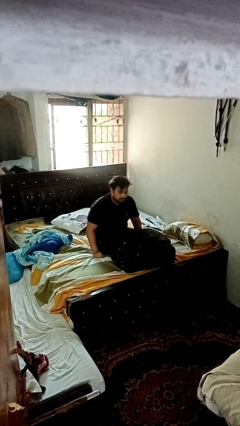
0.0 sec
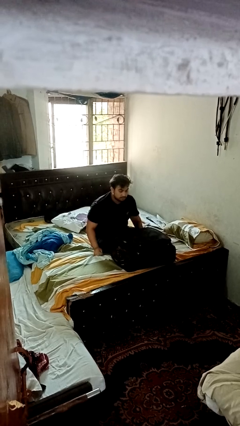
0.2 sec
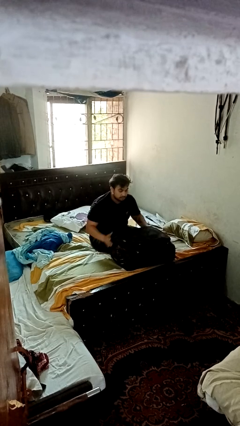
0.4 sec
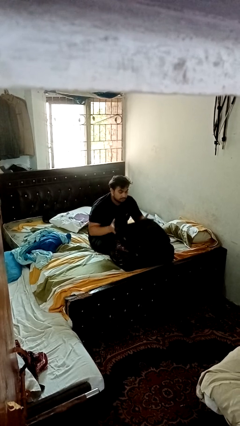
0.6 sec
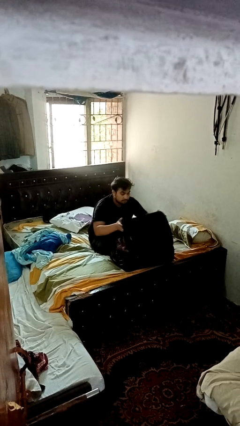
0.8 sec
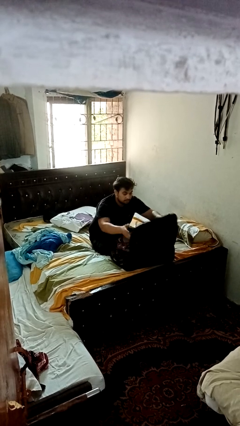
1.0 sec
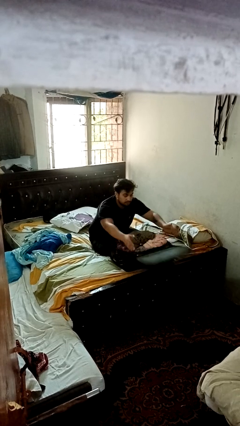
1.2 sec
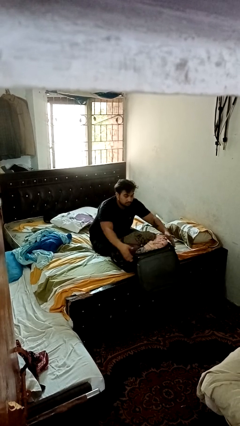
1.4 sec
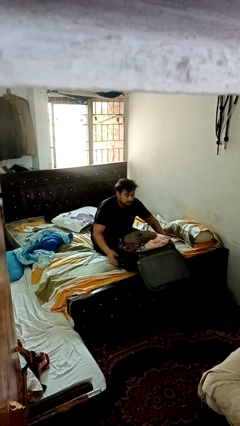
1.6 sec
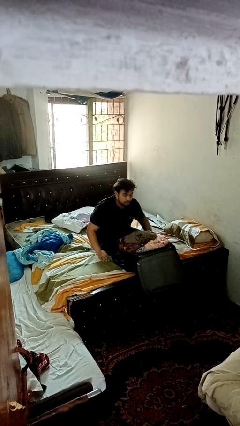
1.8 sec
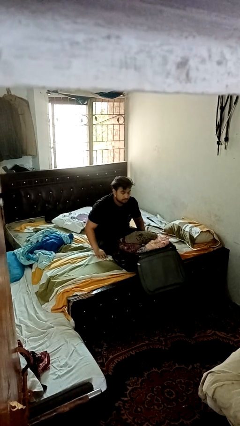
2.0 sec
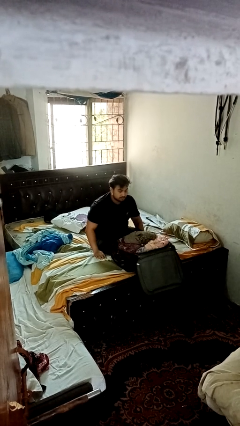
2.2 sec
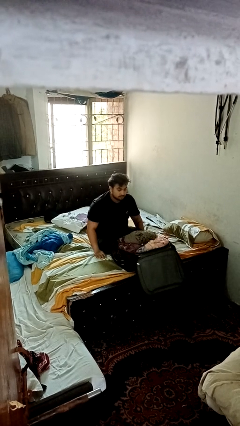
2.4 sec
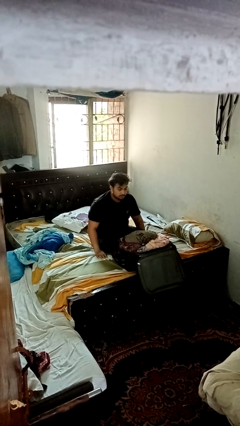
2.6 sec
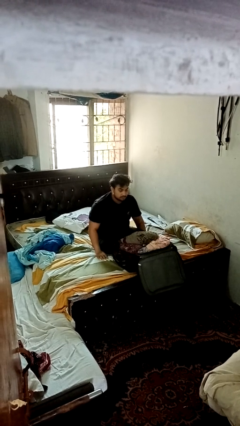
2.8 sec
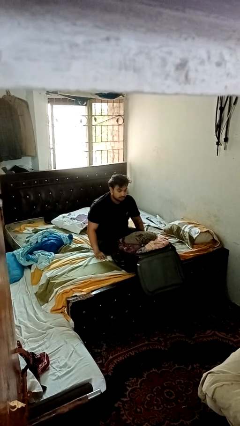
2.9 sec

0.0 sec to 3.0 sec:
person opens suitcase

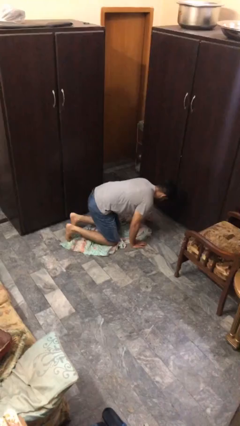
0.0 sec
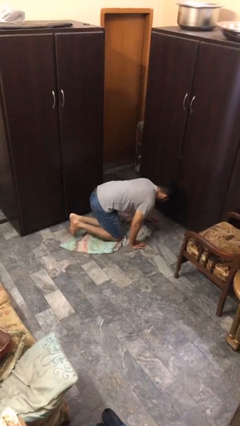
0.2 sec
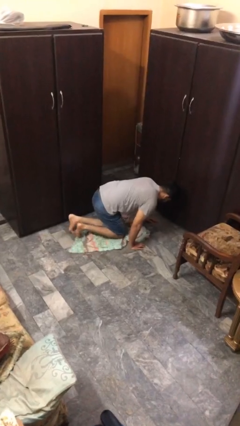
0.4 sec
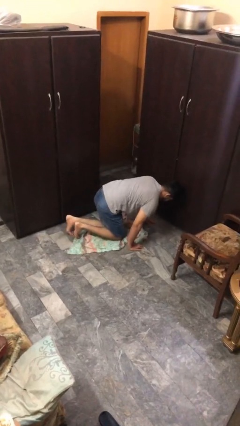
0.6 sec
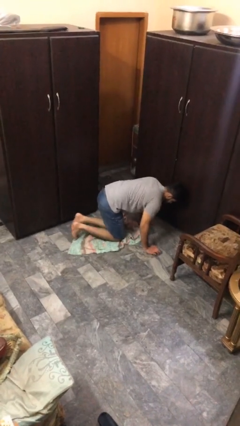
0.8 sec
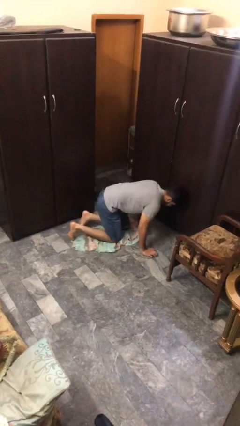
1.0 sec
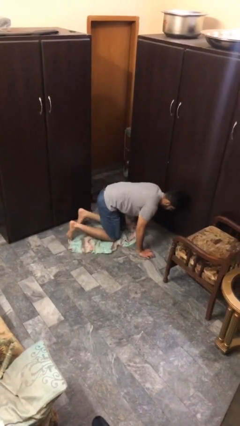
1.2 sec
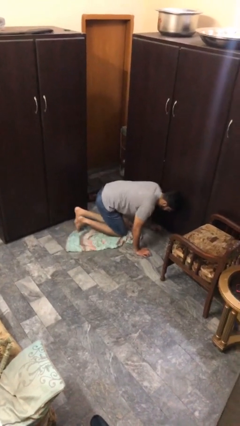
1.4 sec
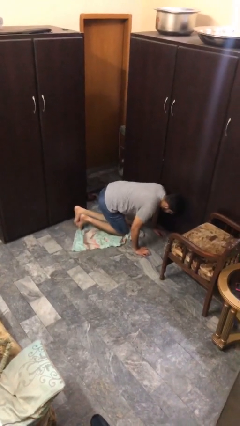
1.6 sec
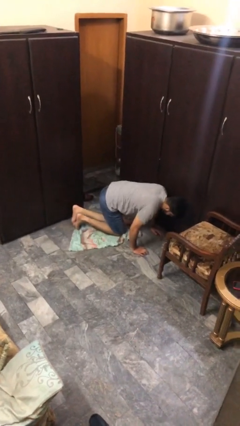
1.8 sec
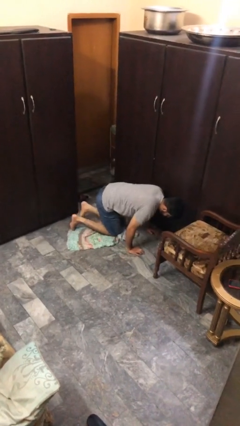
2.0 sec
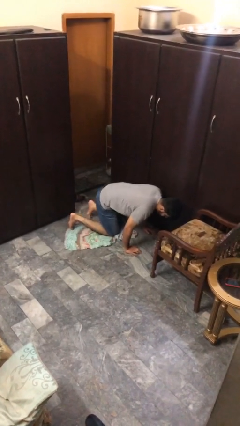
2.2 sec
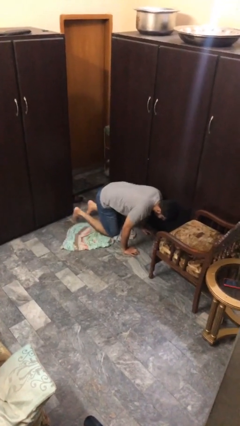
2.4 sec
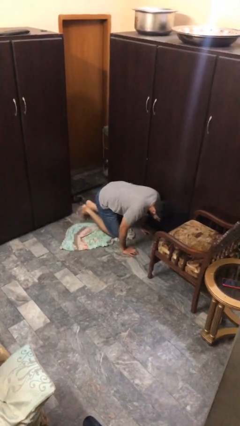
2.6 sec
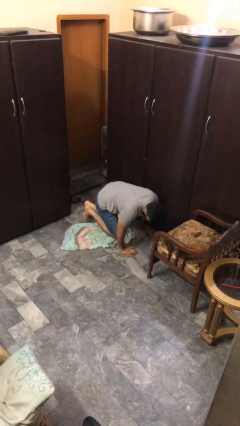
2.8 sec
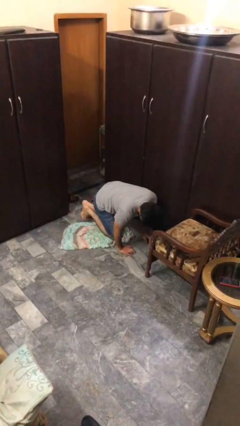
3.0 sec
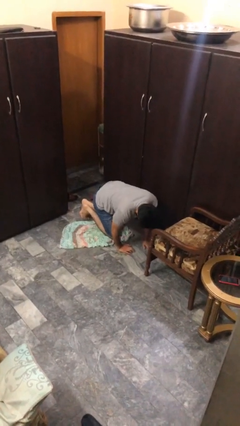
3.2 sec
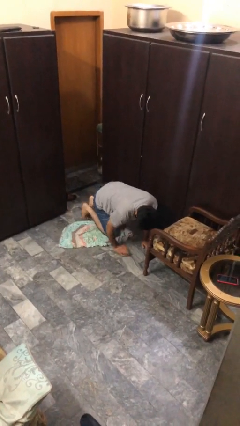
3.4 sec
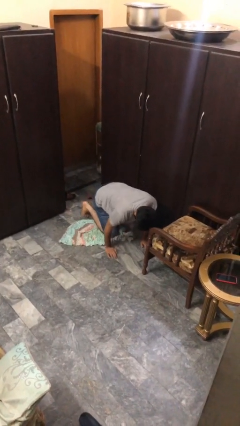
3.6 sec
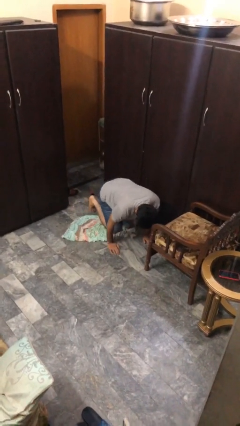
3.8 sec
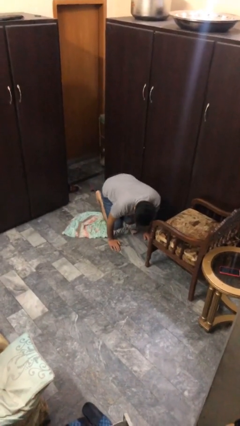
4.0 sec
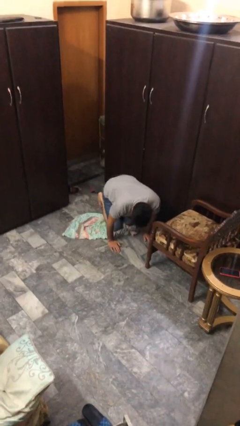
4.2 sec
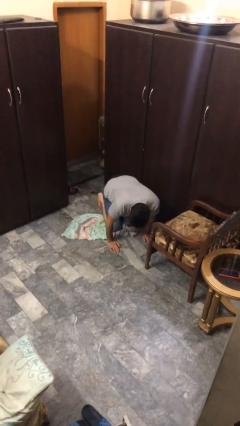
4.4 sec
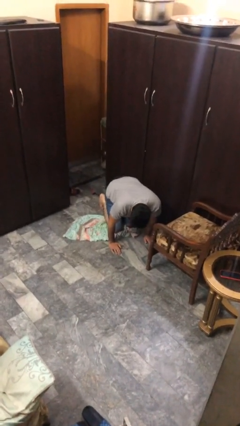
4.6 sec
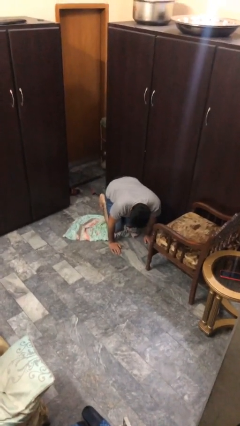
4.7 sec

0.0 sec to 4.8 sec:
person crawls

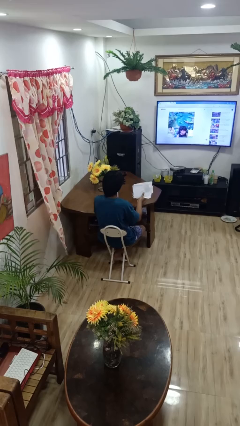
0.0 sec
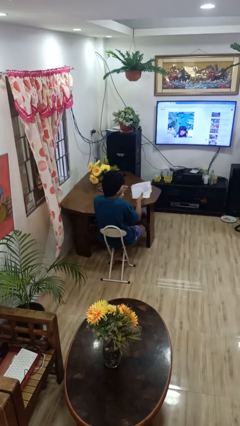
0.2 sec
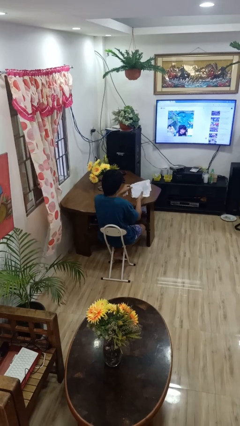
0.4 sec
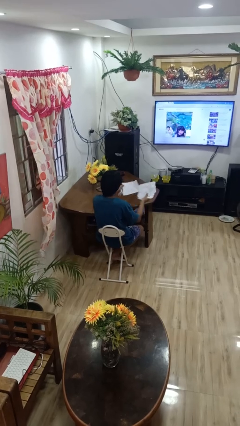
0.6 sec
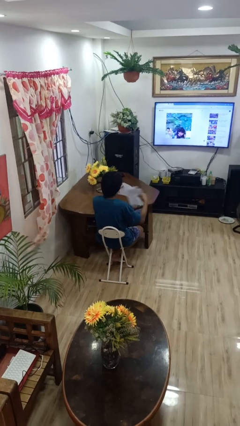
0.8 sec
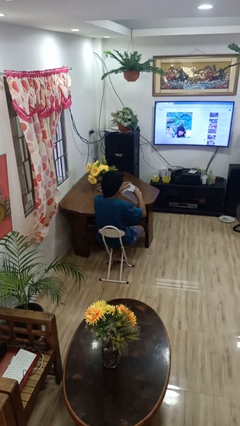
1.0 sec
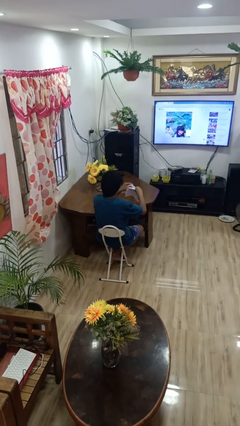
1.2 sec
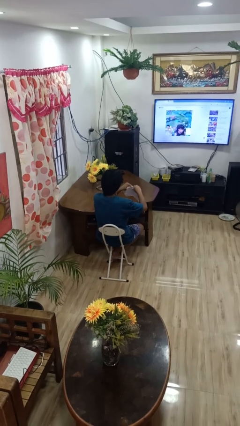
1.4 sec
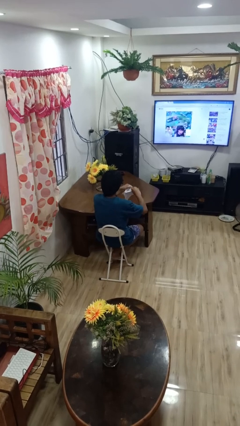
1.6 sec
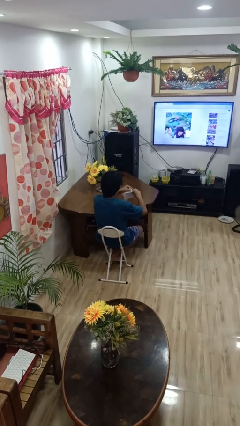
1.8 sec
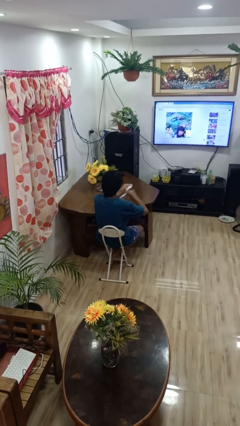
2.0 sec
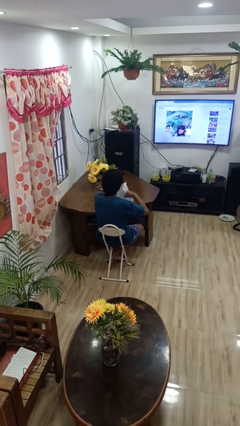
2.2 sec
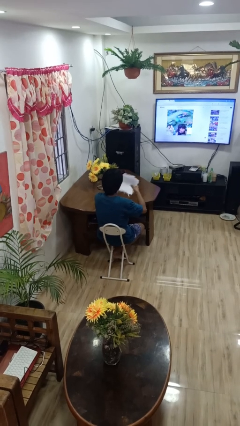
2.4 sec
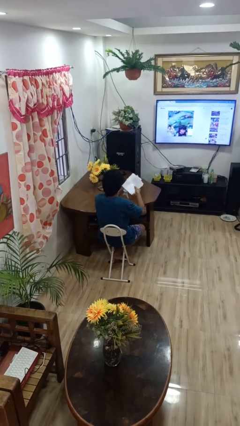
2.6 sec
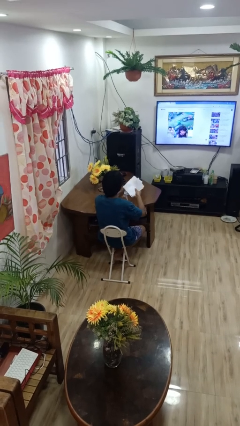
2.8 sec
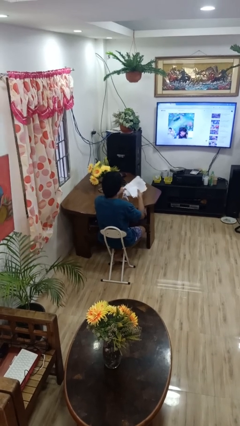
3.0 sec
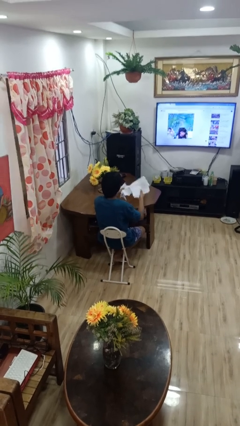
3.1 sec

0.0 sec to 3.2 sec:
person tears paper

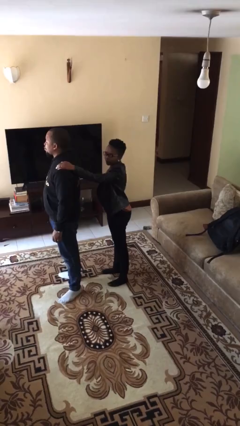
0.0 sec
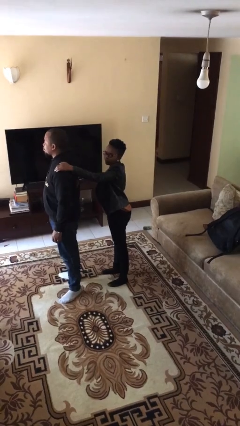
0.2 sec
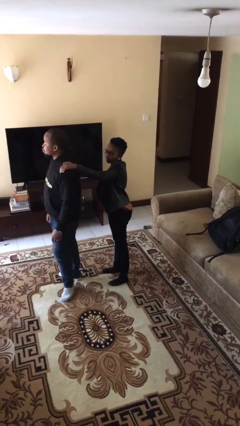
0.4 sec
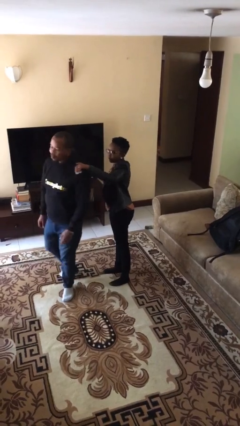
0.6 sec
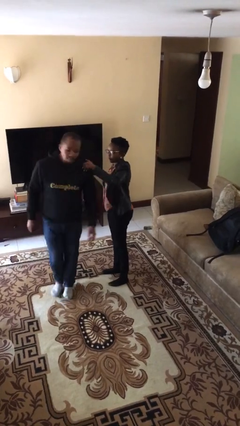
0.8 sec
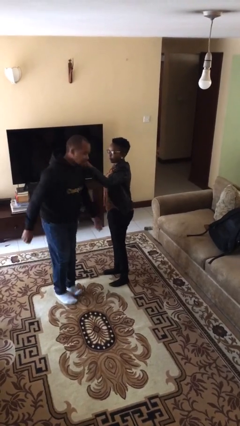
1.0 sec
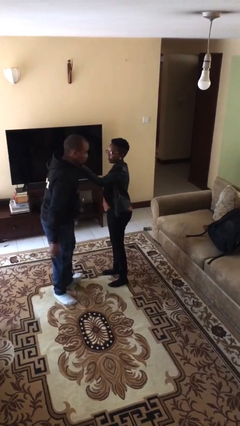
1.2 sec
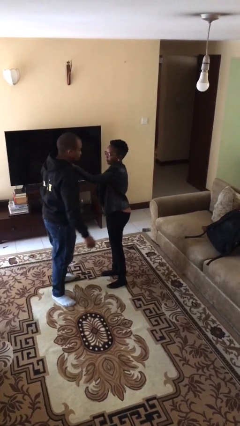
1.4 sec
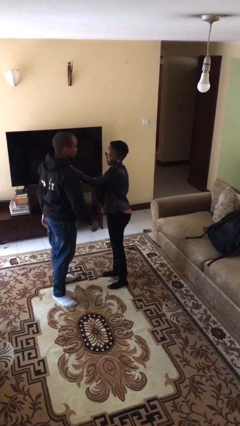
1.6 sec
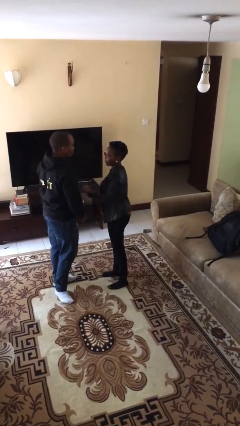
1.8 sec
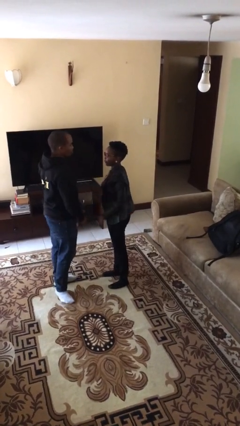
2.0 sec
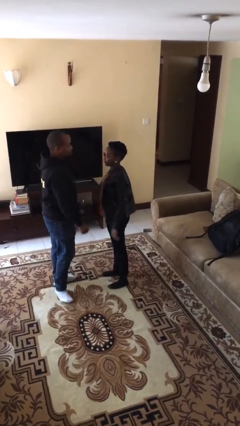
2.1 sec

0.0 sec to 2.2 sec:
person spins person around

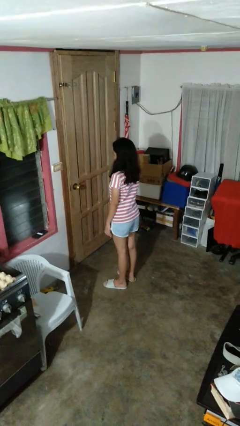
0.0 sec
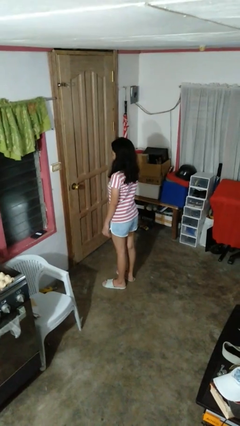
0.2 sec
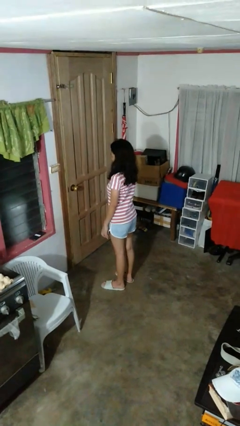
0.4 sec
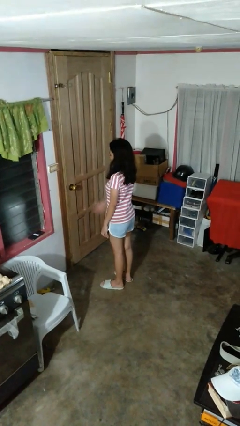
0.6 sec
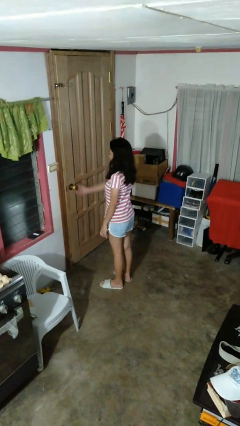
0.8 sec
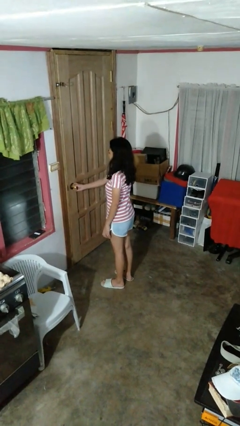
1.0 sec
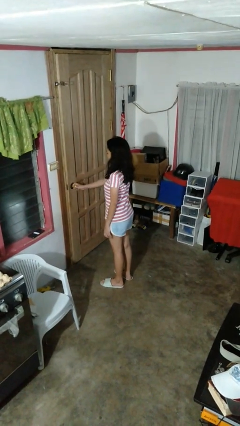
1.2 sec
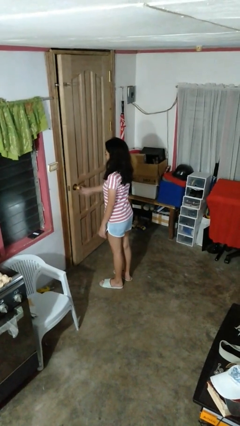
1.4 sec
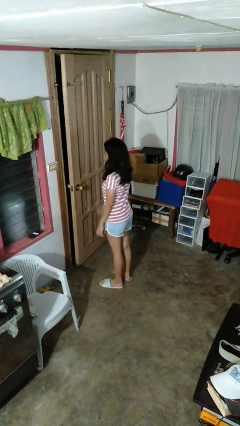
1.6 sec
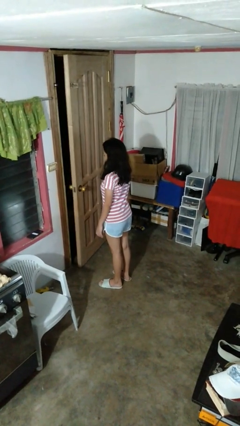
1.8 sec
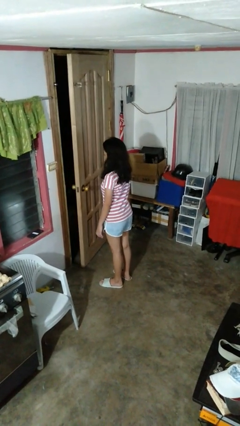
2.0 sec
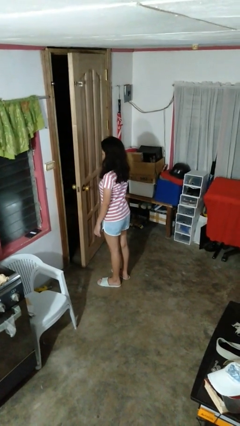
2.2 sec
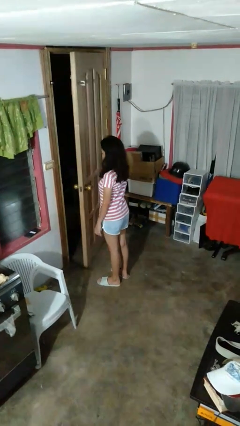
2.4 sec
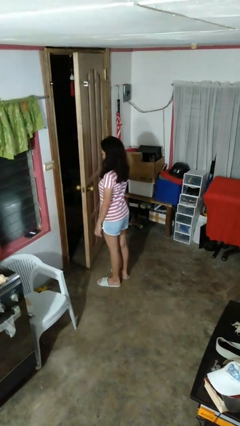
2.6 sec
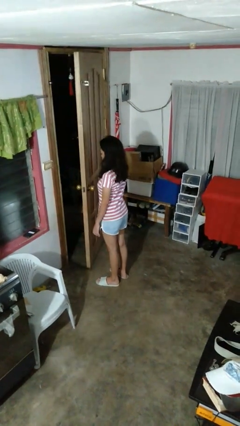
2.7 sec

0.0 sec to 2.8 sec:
person opens facility door

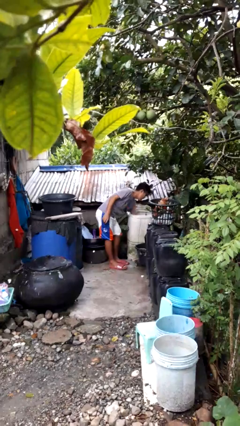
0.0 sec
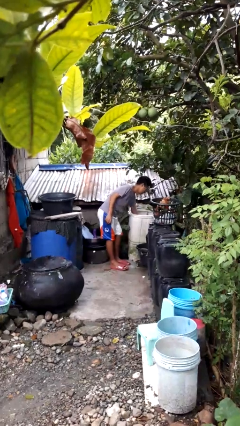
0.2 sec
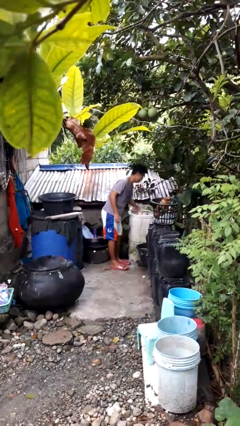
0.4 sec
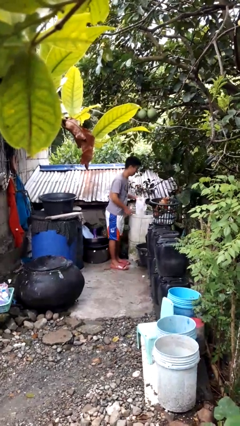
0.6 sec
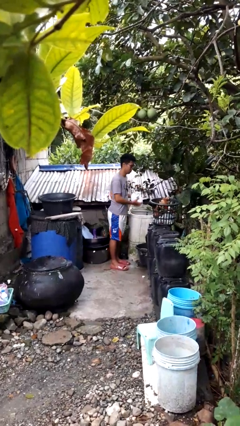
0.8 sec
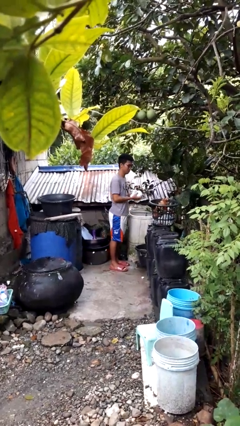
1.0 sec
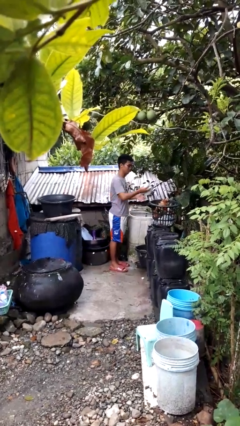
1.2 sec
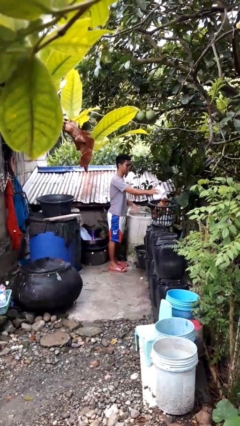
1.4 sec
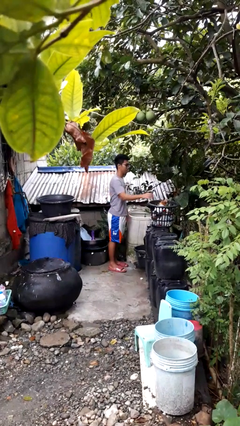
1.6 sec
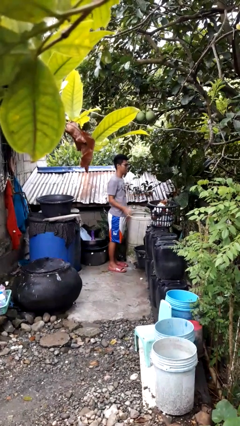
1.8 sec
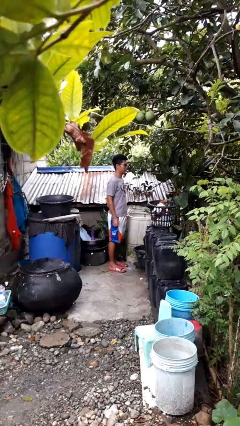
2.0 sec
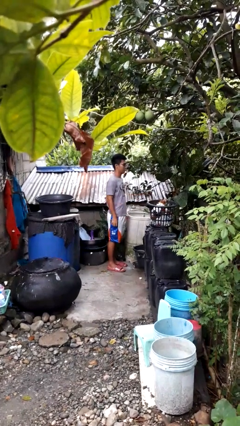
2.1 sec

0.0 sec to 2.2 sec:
person loads clotheswasher
